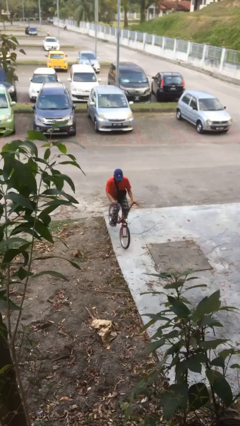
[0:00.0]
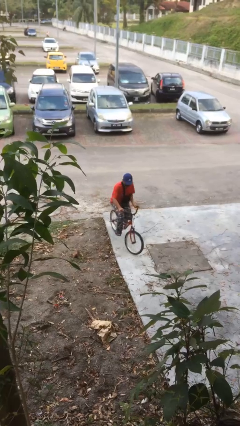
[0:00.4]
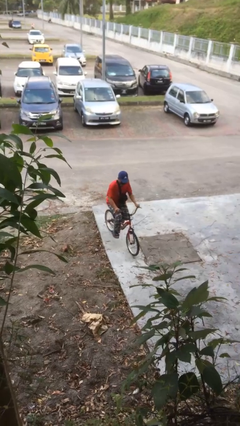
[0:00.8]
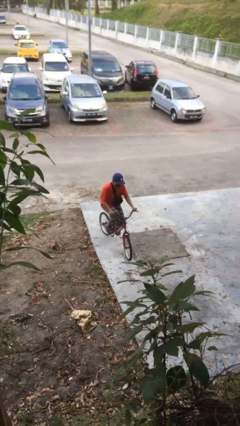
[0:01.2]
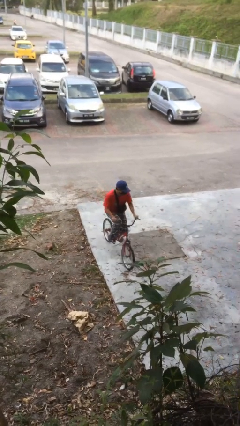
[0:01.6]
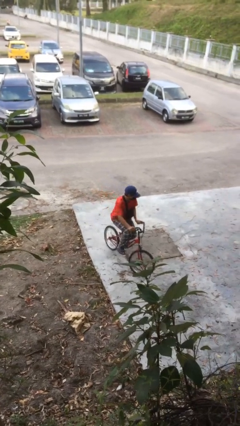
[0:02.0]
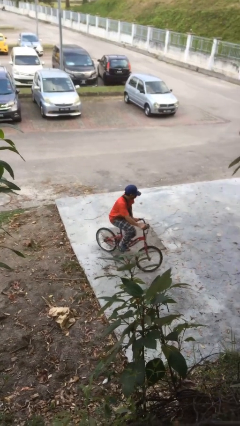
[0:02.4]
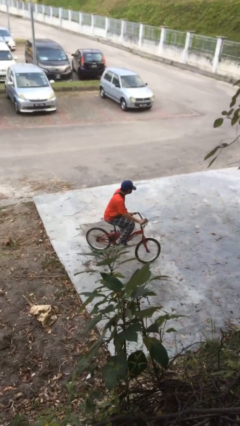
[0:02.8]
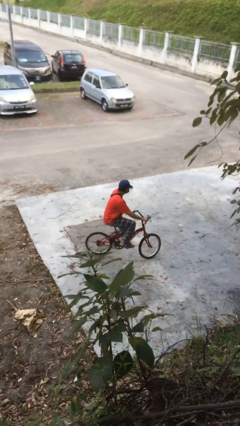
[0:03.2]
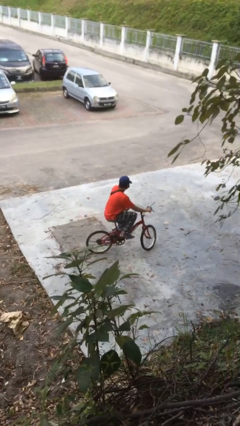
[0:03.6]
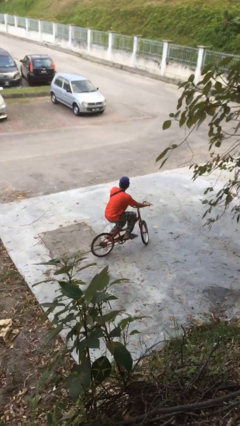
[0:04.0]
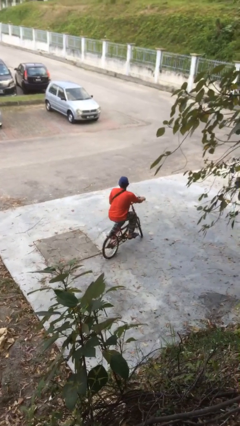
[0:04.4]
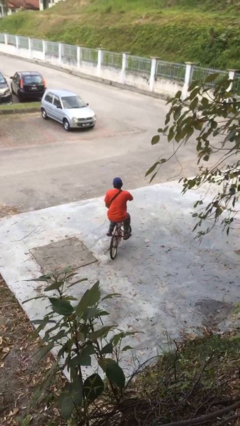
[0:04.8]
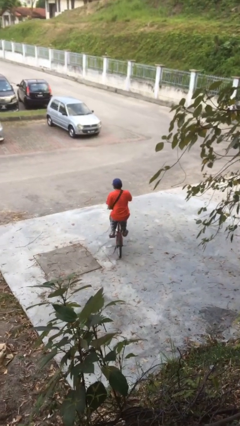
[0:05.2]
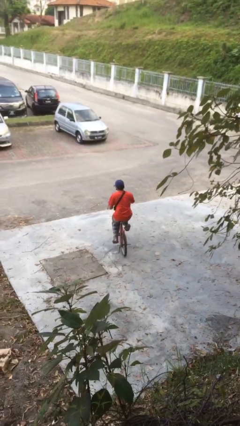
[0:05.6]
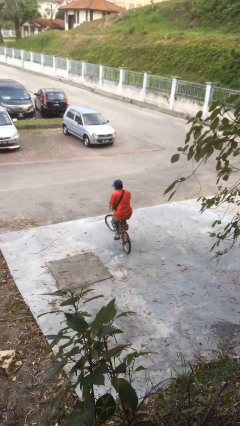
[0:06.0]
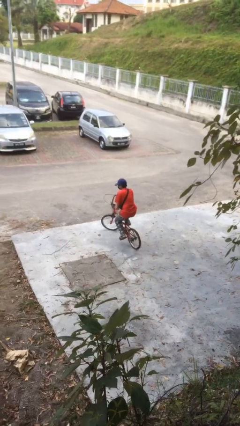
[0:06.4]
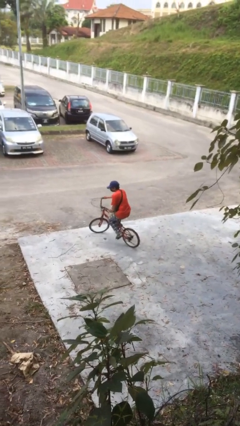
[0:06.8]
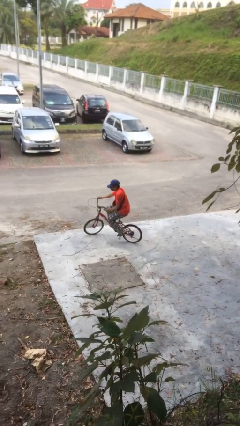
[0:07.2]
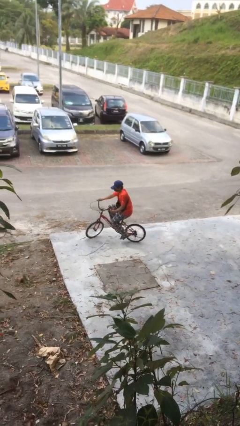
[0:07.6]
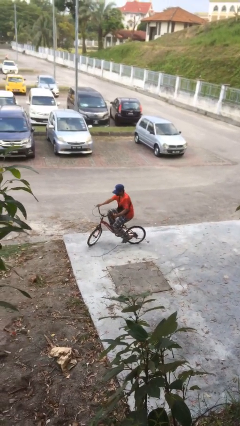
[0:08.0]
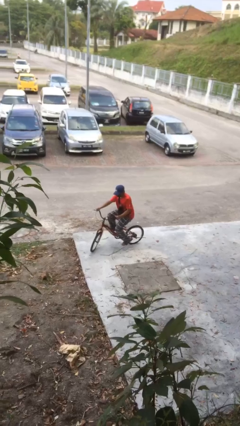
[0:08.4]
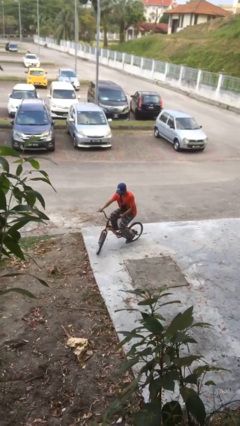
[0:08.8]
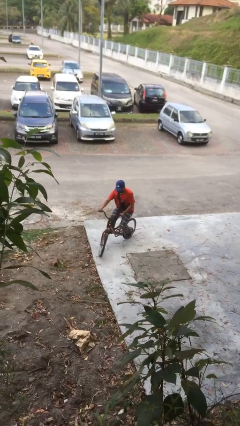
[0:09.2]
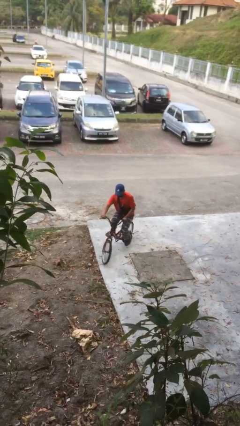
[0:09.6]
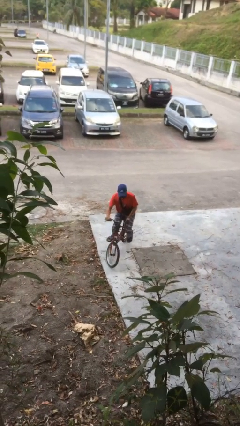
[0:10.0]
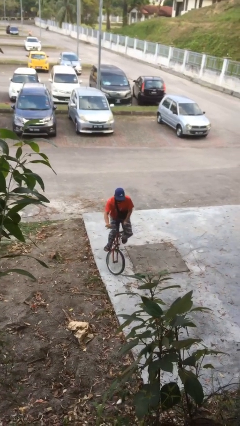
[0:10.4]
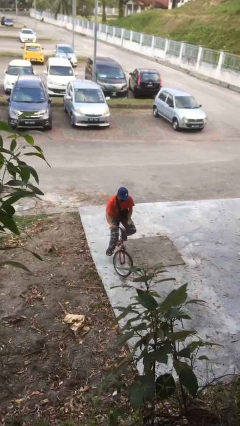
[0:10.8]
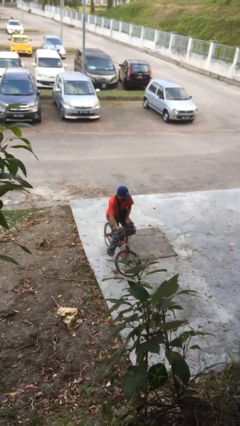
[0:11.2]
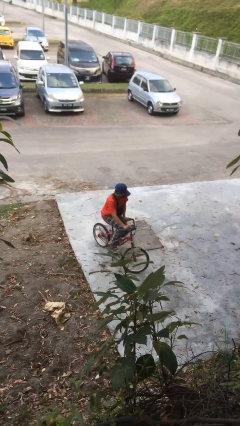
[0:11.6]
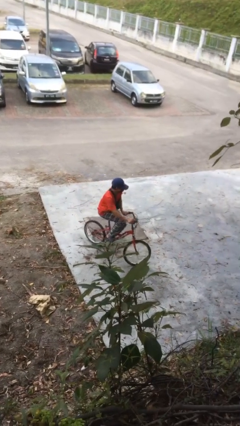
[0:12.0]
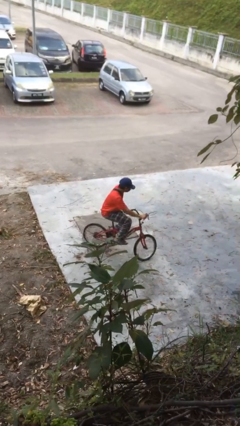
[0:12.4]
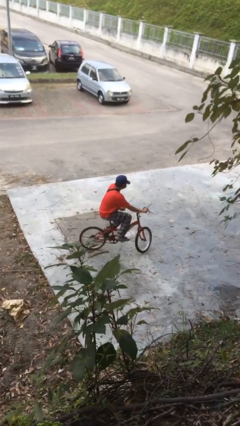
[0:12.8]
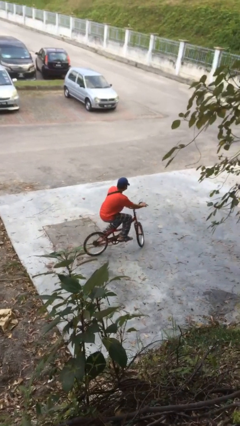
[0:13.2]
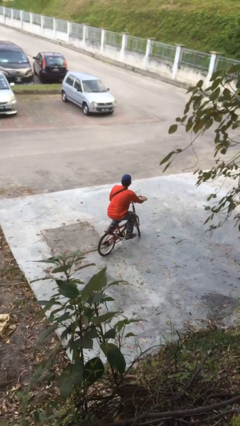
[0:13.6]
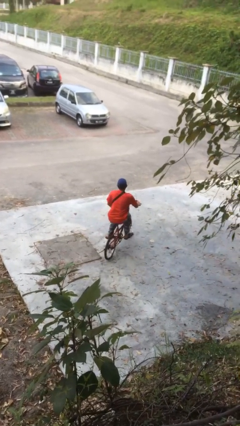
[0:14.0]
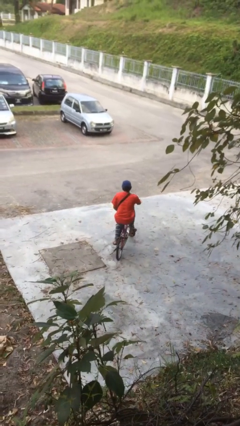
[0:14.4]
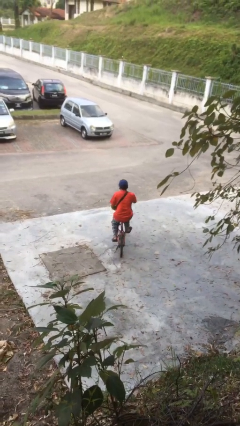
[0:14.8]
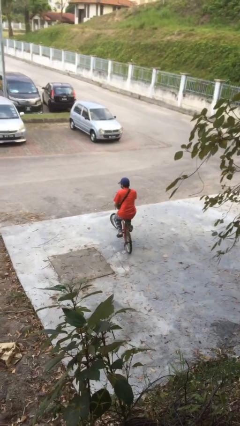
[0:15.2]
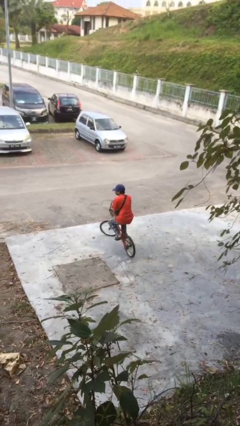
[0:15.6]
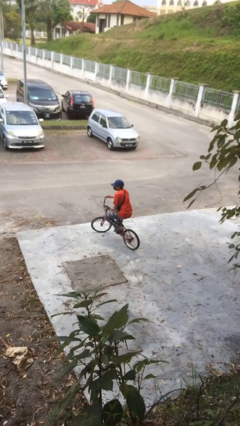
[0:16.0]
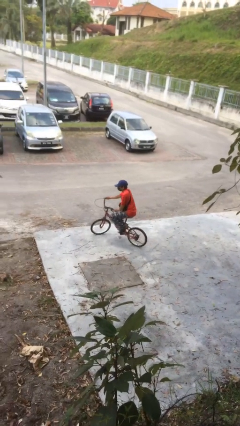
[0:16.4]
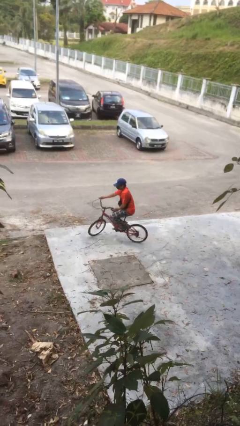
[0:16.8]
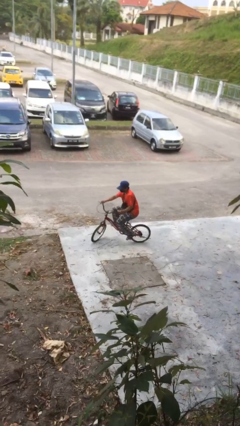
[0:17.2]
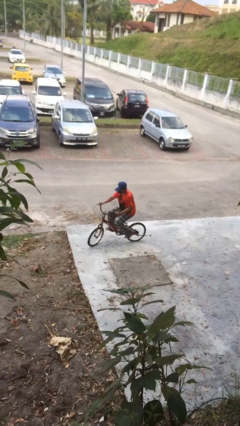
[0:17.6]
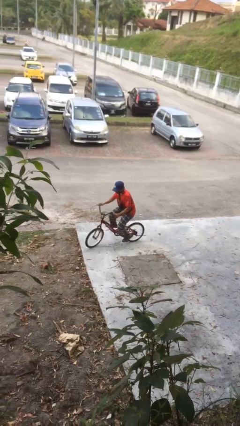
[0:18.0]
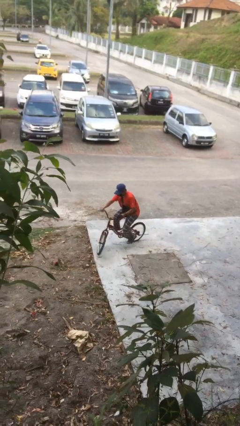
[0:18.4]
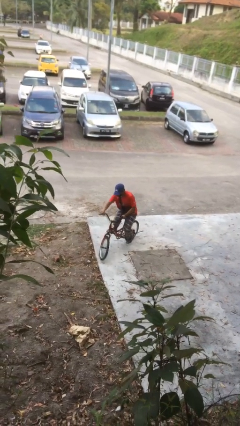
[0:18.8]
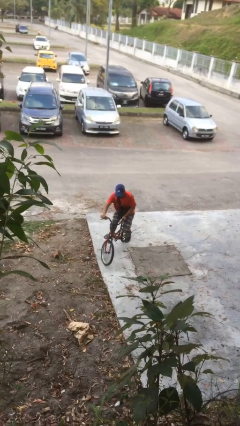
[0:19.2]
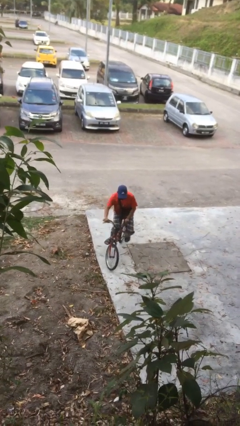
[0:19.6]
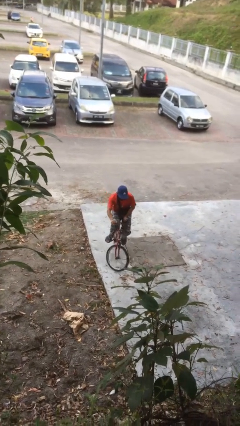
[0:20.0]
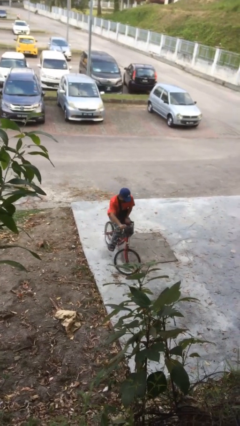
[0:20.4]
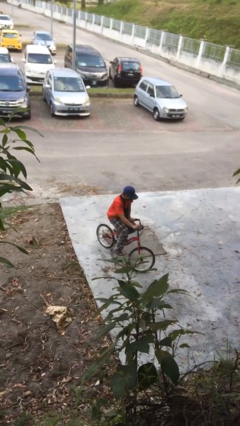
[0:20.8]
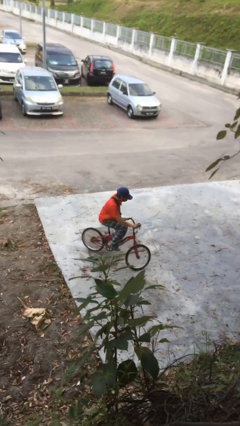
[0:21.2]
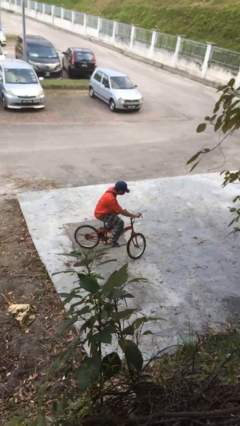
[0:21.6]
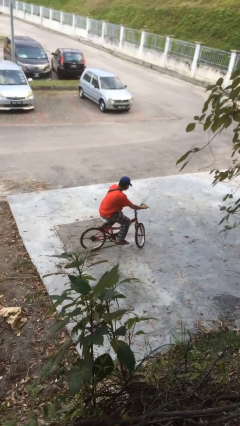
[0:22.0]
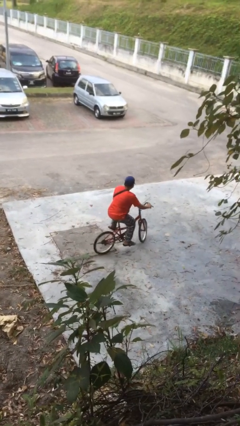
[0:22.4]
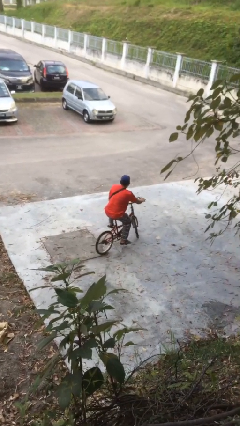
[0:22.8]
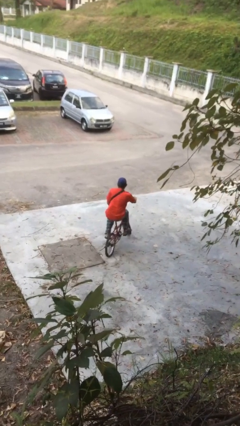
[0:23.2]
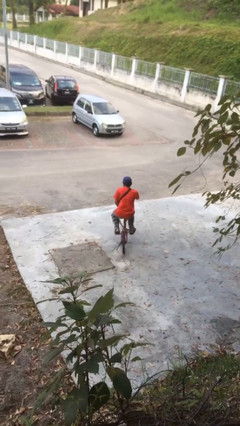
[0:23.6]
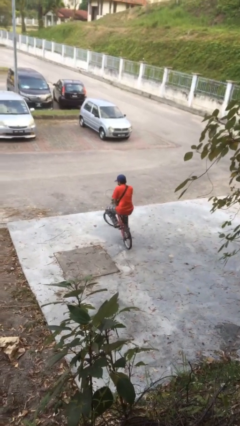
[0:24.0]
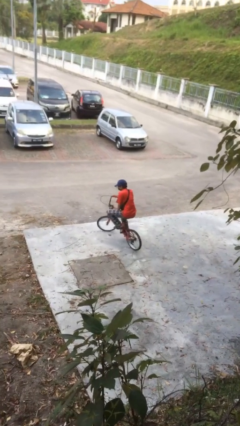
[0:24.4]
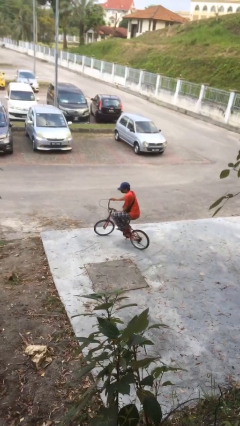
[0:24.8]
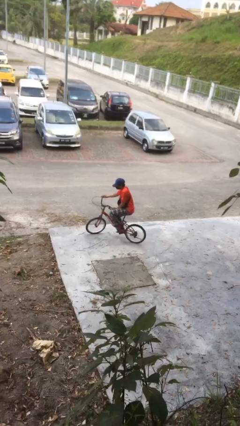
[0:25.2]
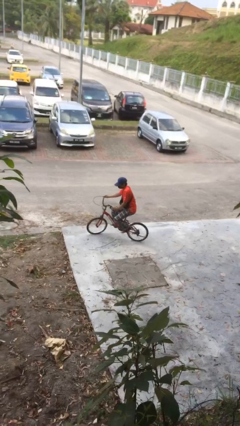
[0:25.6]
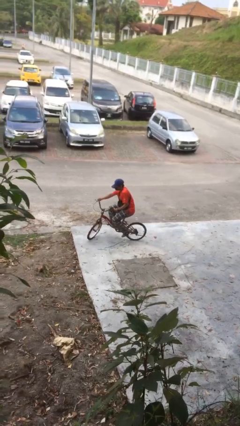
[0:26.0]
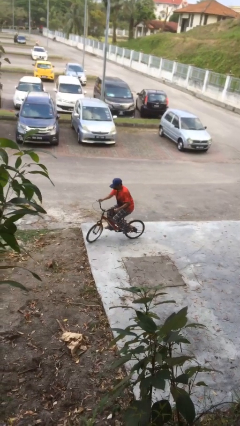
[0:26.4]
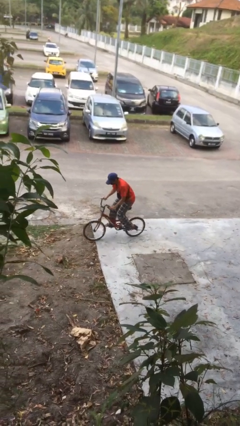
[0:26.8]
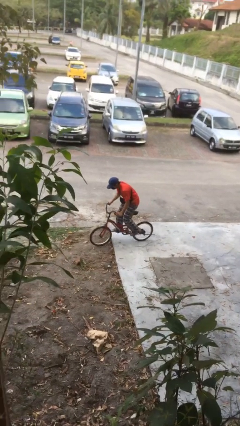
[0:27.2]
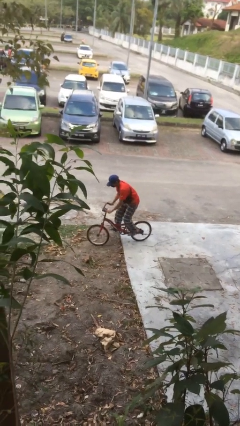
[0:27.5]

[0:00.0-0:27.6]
person rides bicycle

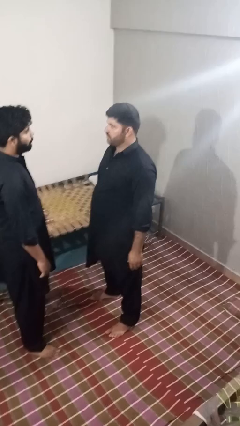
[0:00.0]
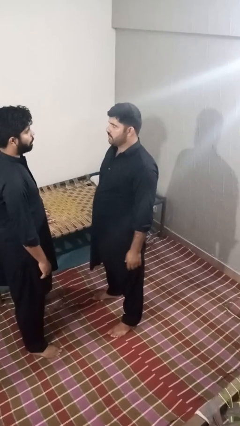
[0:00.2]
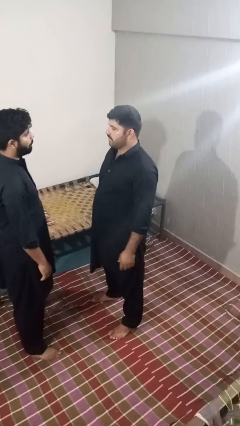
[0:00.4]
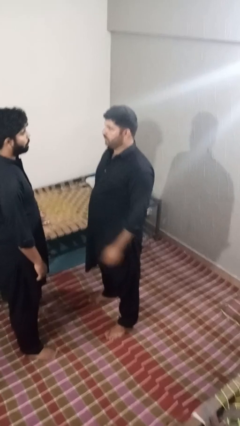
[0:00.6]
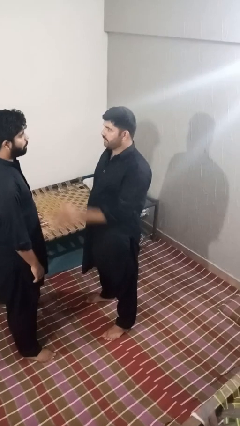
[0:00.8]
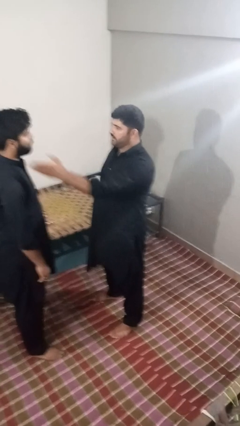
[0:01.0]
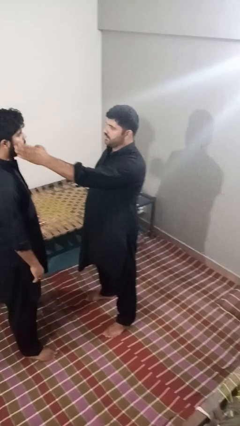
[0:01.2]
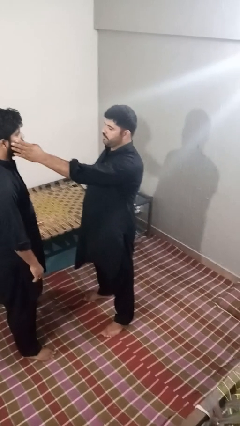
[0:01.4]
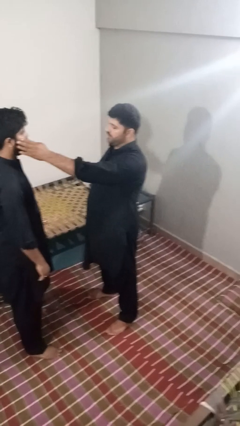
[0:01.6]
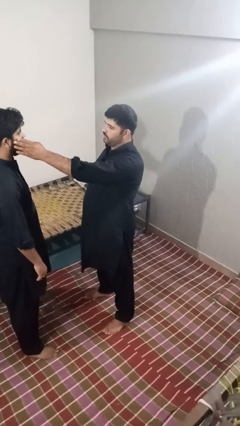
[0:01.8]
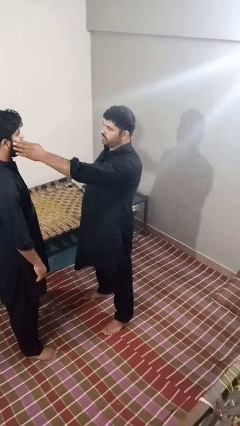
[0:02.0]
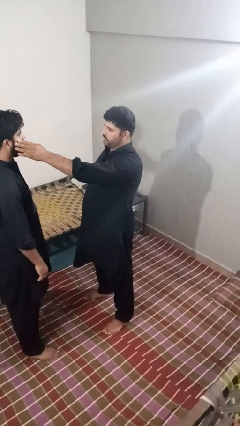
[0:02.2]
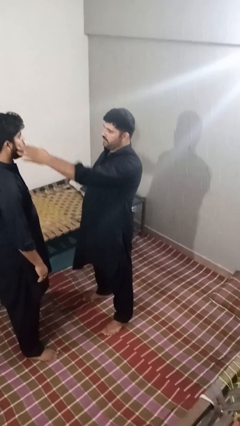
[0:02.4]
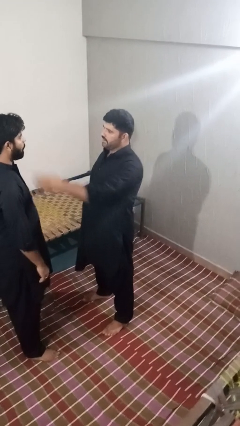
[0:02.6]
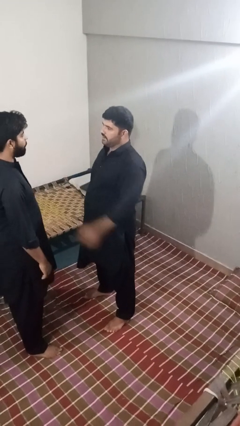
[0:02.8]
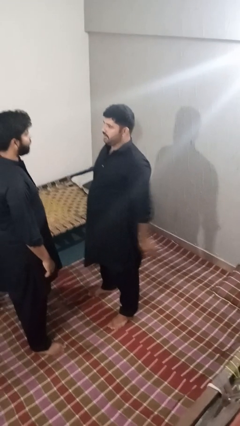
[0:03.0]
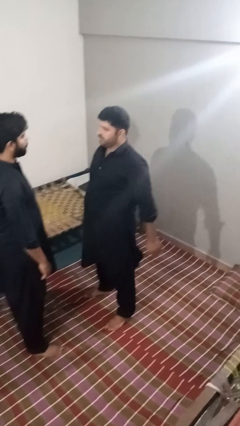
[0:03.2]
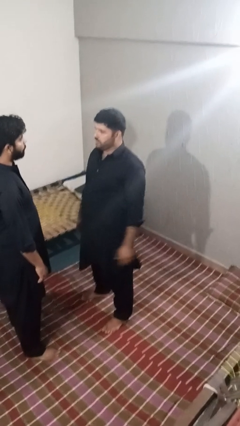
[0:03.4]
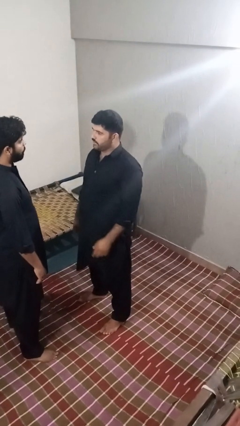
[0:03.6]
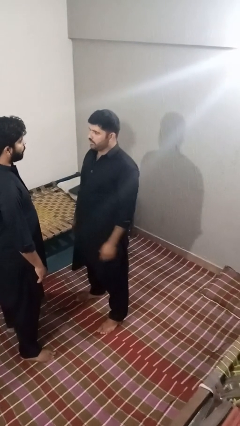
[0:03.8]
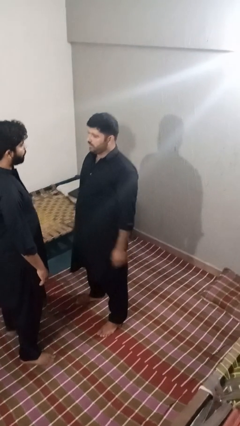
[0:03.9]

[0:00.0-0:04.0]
person touches face of person

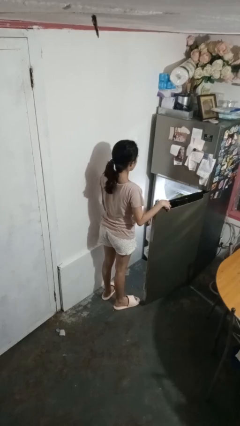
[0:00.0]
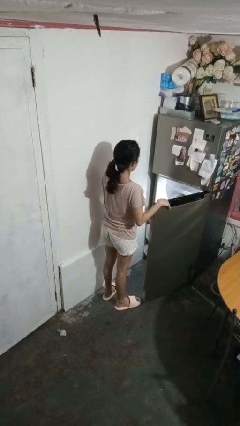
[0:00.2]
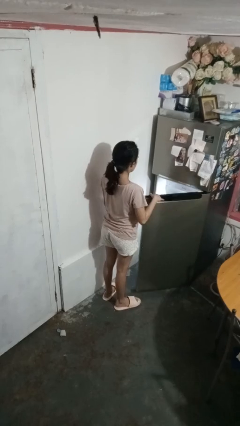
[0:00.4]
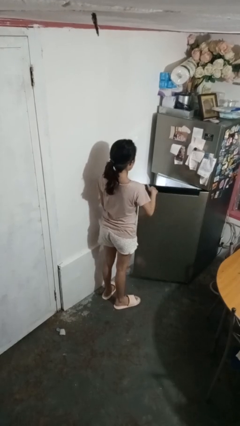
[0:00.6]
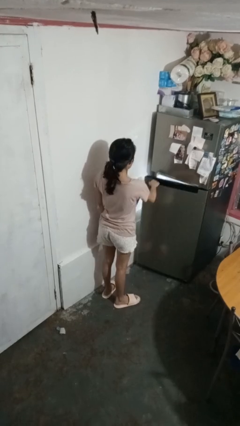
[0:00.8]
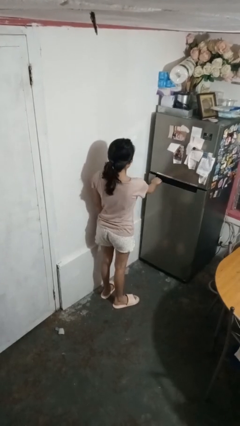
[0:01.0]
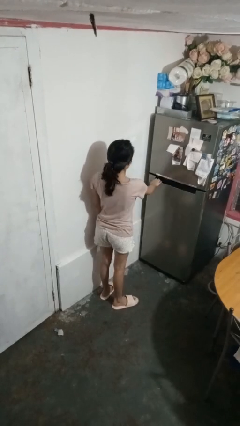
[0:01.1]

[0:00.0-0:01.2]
person closes refrigerator
